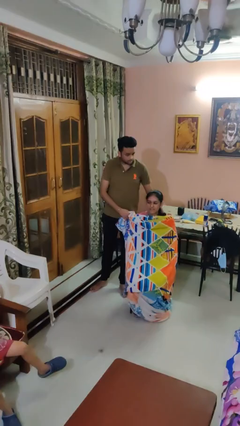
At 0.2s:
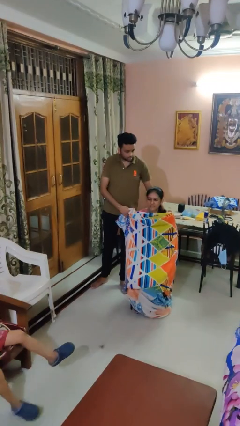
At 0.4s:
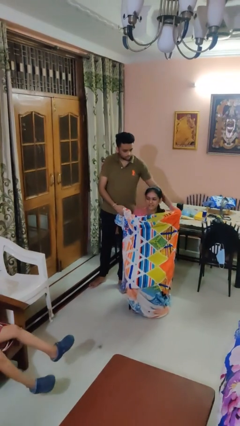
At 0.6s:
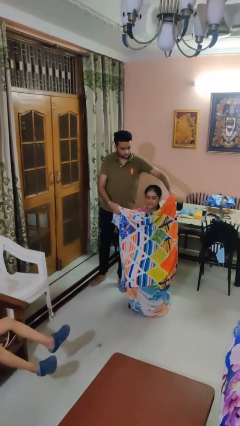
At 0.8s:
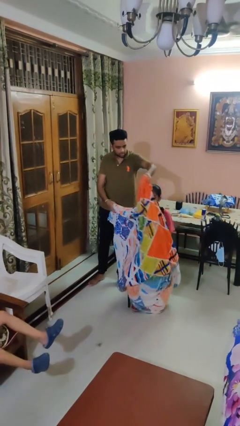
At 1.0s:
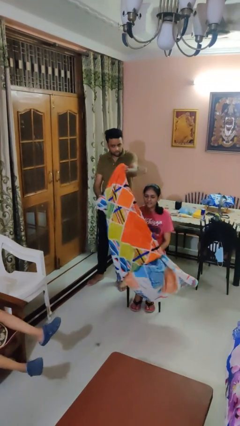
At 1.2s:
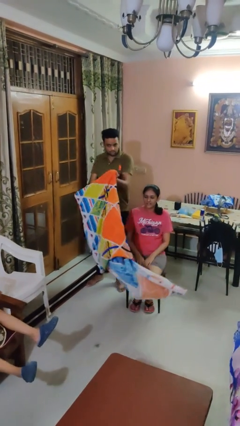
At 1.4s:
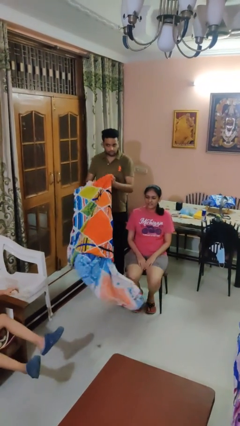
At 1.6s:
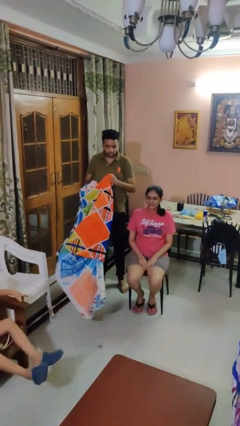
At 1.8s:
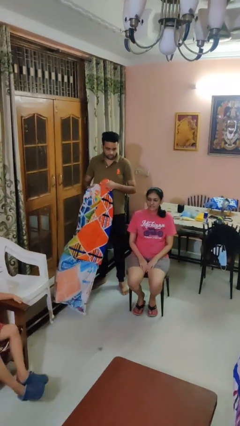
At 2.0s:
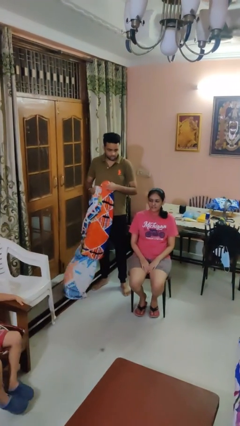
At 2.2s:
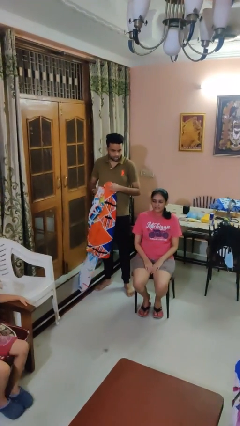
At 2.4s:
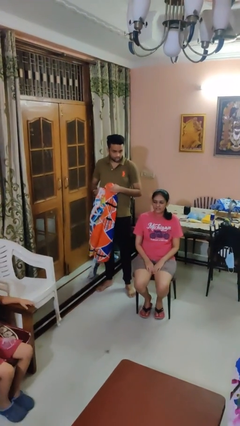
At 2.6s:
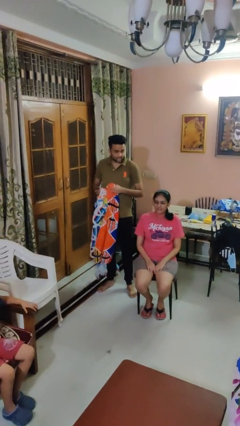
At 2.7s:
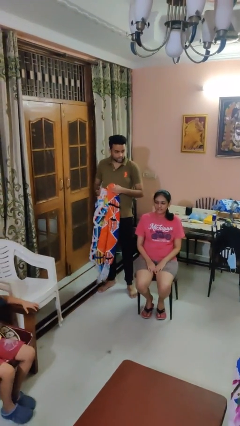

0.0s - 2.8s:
person uncovers friend with blanket

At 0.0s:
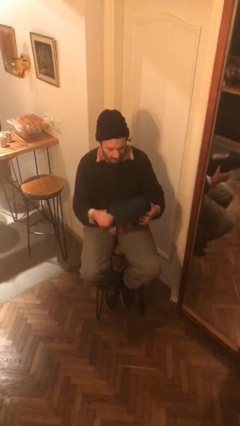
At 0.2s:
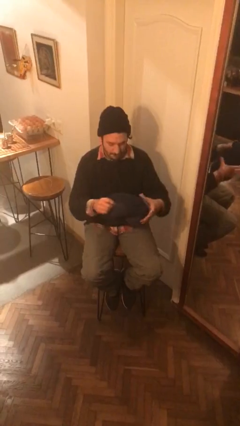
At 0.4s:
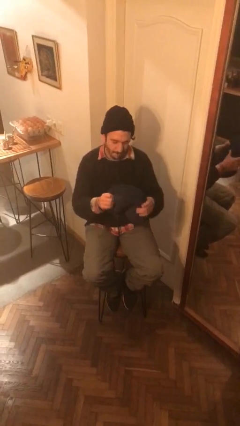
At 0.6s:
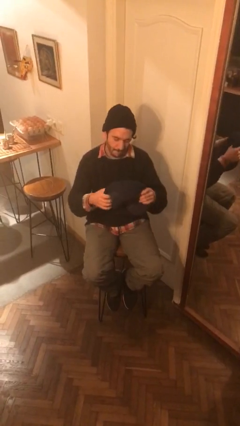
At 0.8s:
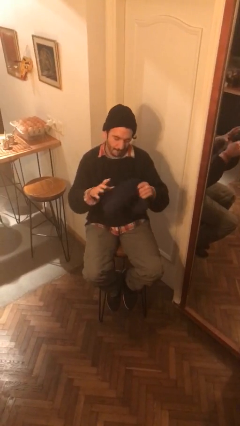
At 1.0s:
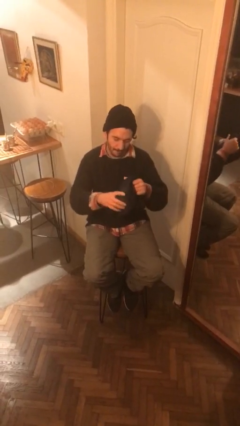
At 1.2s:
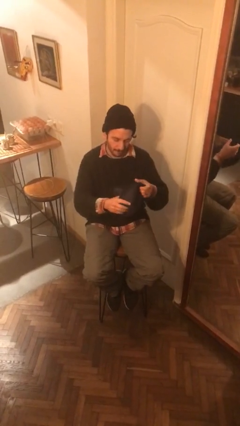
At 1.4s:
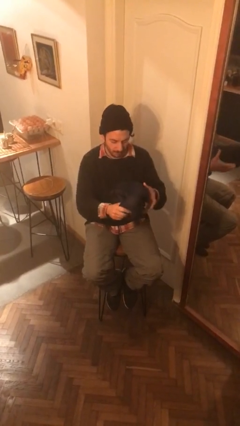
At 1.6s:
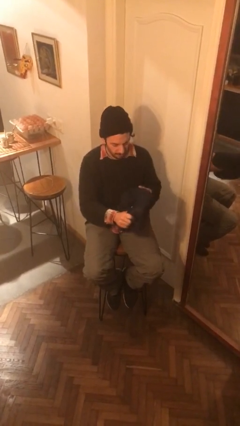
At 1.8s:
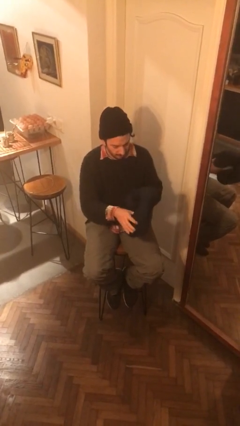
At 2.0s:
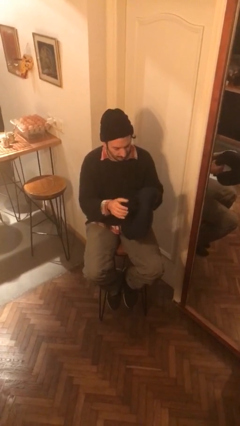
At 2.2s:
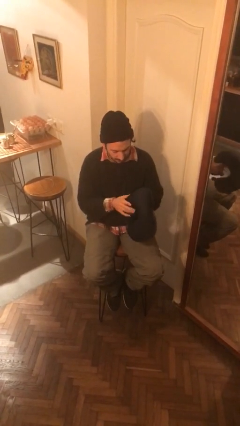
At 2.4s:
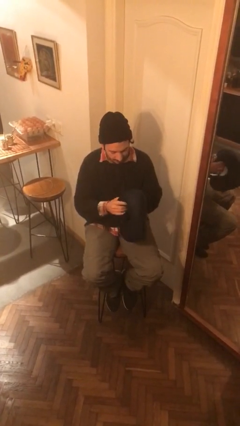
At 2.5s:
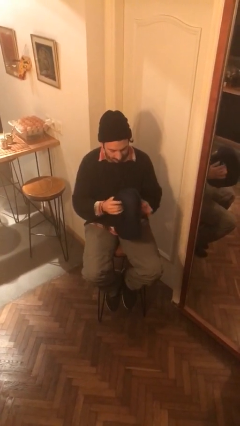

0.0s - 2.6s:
person squeezes object

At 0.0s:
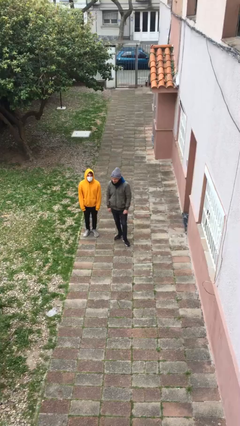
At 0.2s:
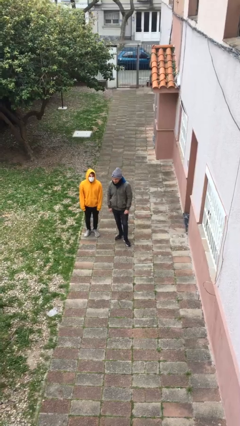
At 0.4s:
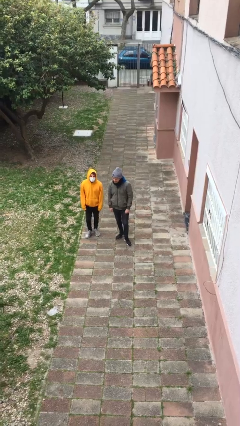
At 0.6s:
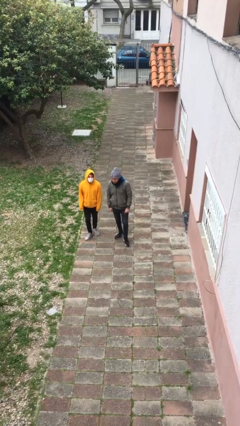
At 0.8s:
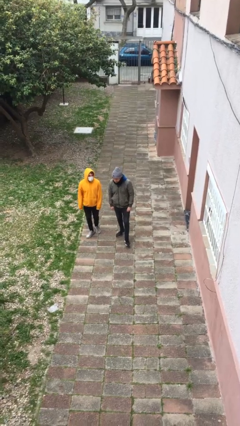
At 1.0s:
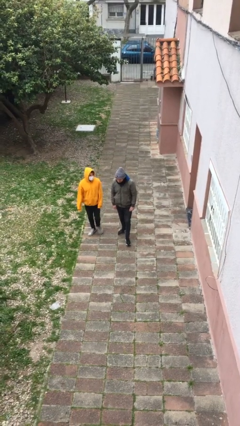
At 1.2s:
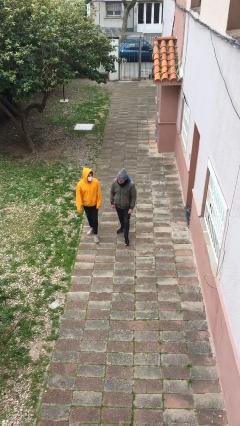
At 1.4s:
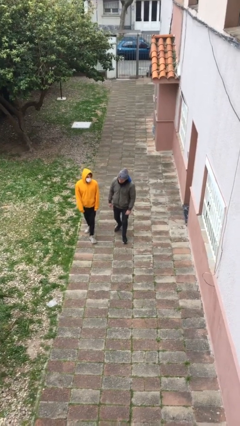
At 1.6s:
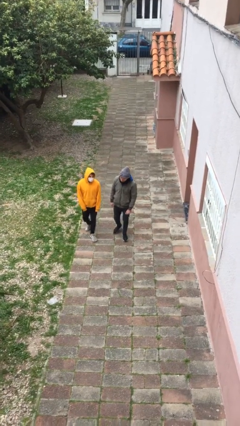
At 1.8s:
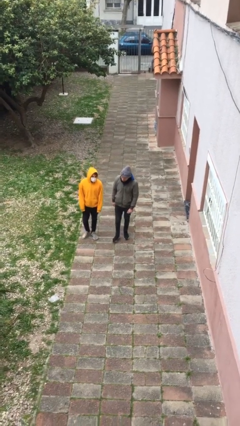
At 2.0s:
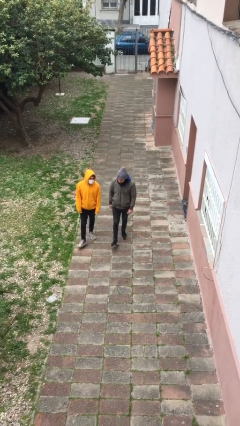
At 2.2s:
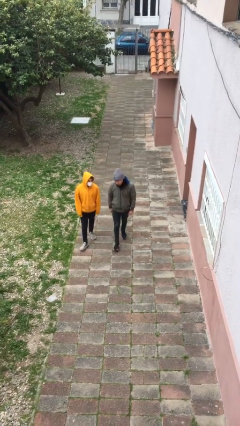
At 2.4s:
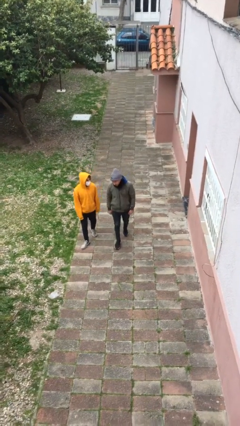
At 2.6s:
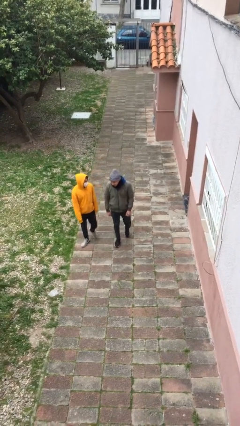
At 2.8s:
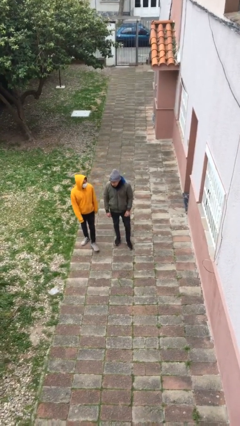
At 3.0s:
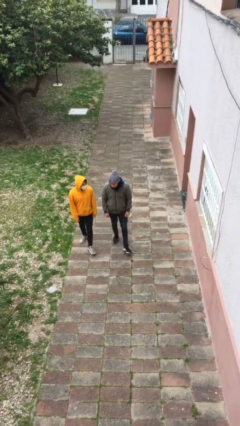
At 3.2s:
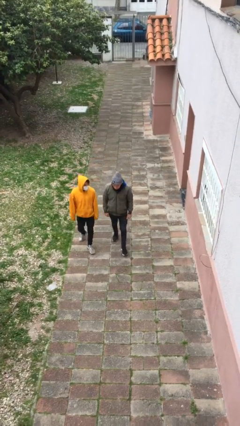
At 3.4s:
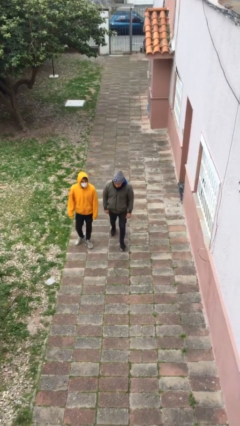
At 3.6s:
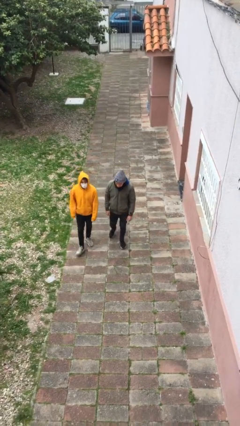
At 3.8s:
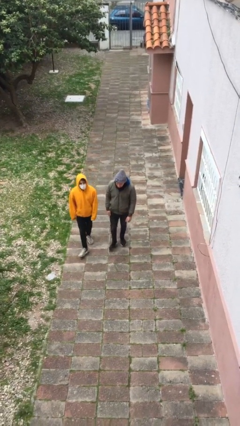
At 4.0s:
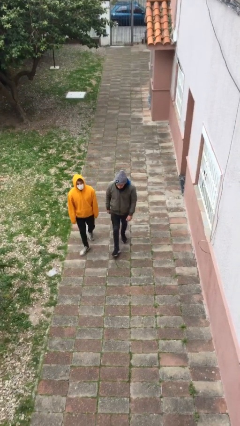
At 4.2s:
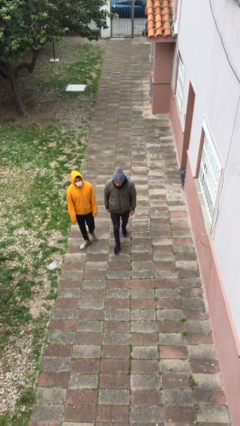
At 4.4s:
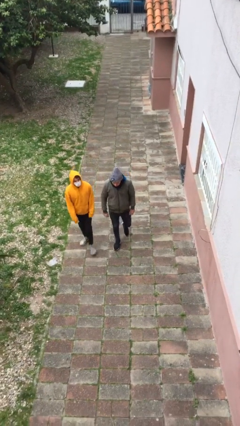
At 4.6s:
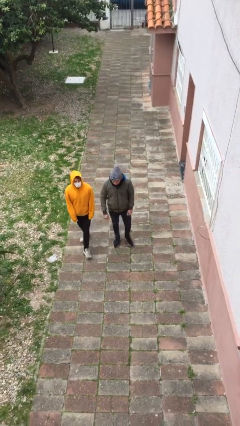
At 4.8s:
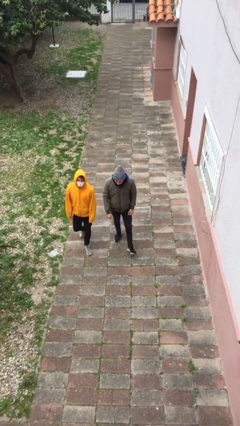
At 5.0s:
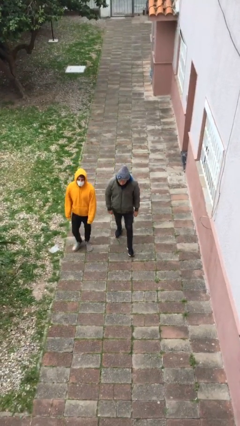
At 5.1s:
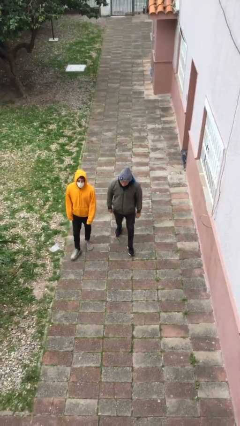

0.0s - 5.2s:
person talks to person

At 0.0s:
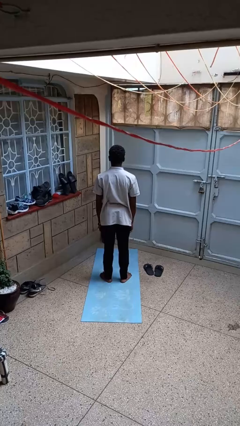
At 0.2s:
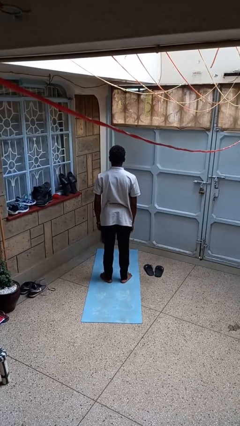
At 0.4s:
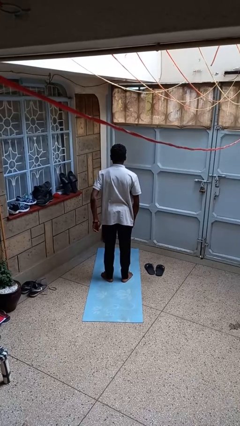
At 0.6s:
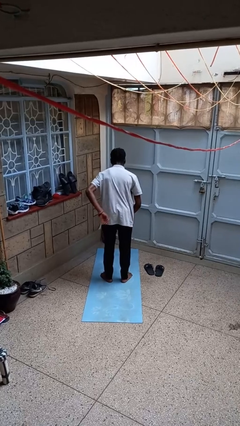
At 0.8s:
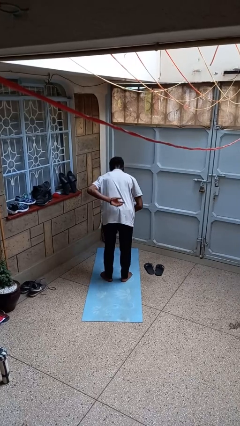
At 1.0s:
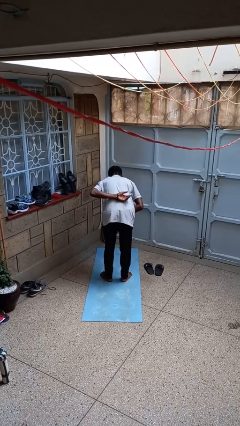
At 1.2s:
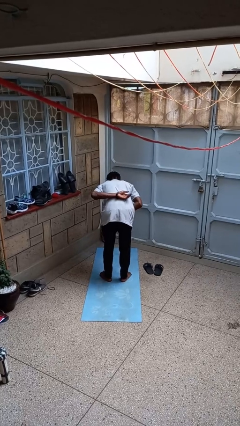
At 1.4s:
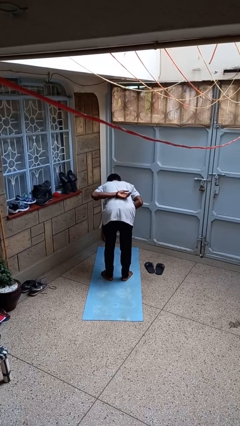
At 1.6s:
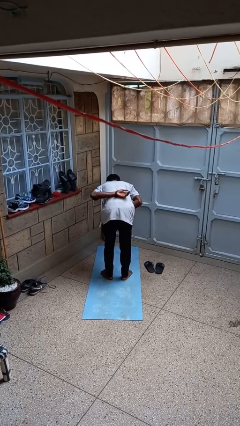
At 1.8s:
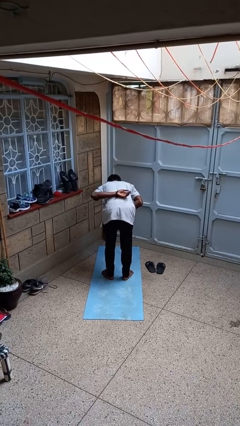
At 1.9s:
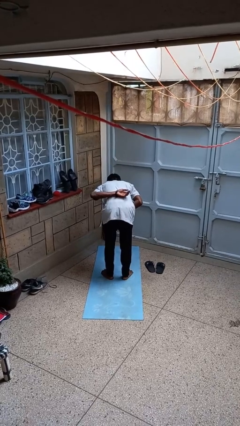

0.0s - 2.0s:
person bows

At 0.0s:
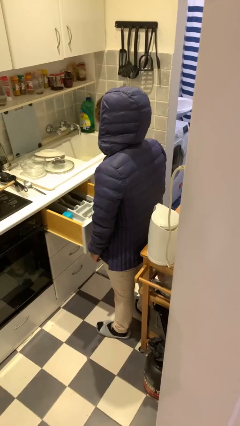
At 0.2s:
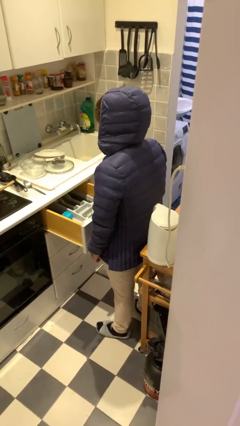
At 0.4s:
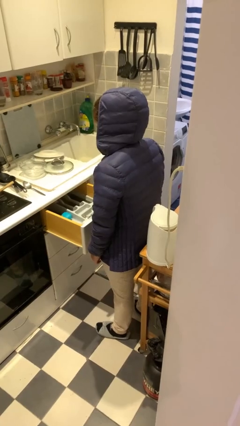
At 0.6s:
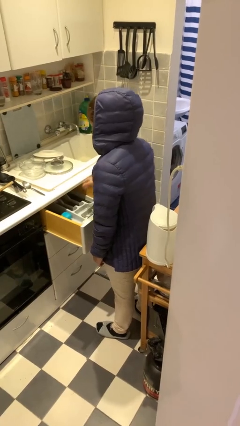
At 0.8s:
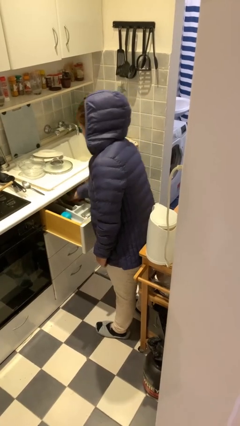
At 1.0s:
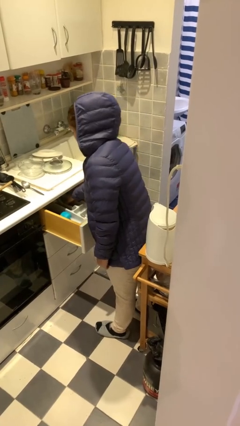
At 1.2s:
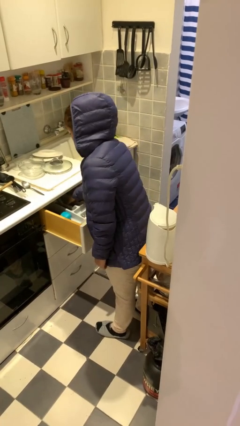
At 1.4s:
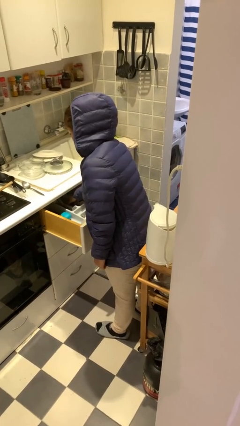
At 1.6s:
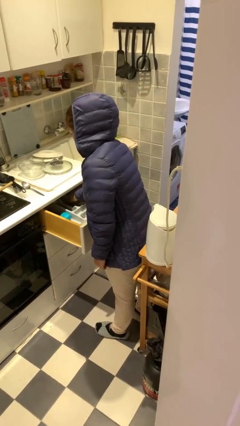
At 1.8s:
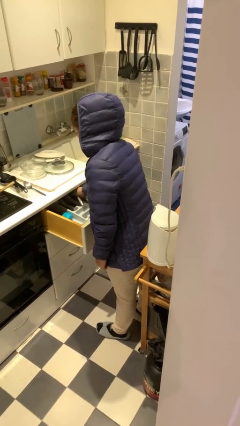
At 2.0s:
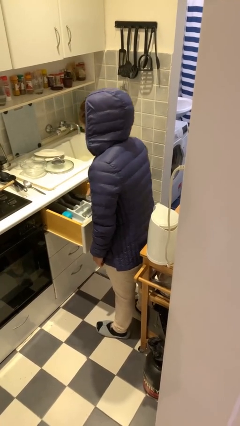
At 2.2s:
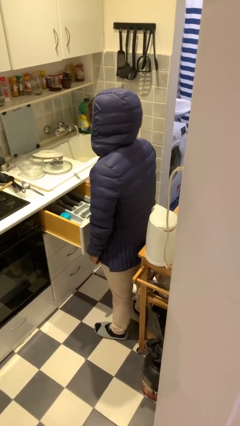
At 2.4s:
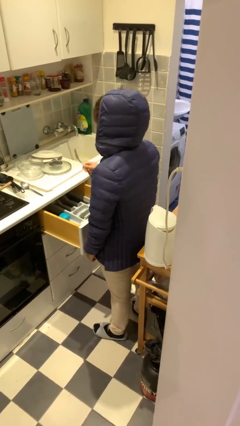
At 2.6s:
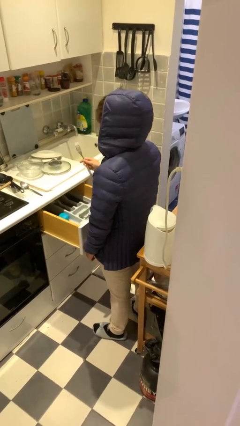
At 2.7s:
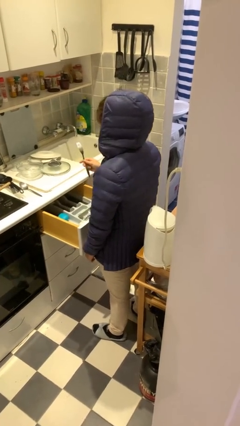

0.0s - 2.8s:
person takes object from kitchen drawer

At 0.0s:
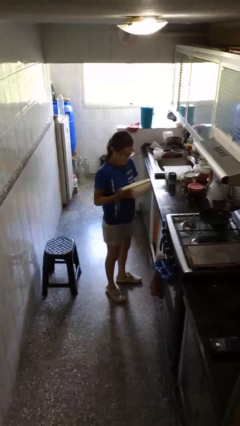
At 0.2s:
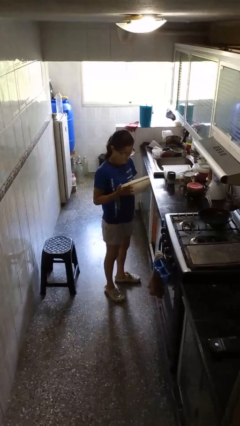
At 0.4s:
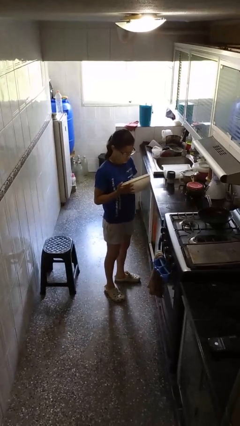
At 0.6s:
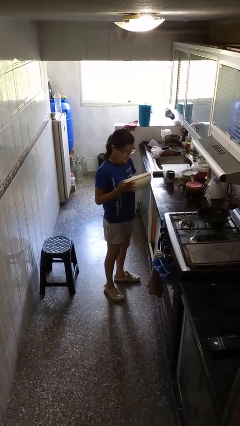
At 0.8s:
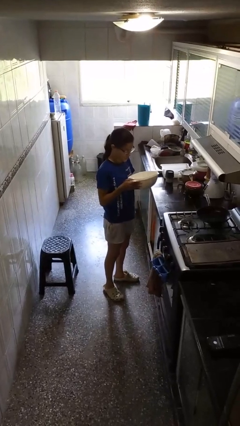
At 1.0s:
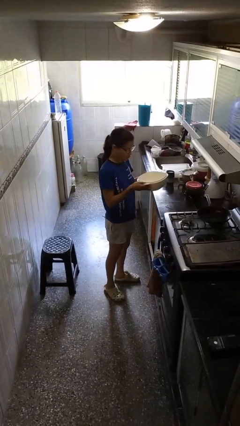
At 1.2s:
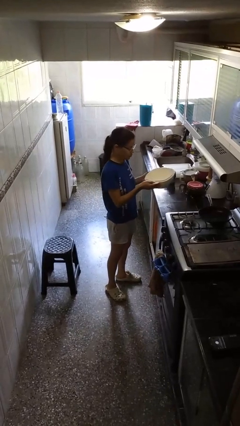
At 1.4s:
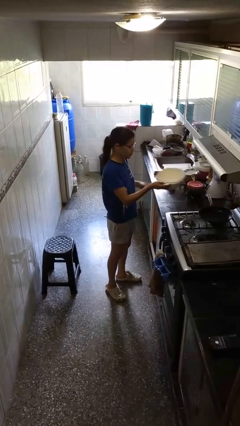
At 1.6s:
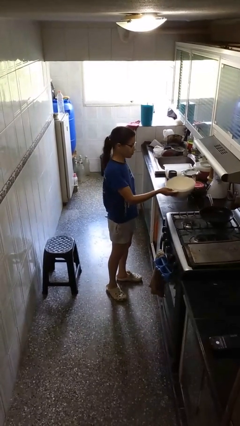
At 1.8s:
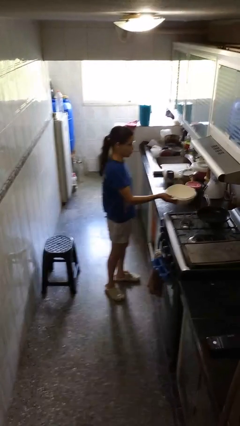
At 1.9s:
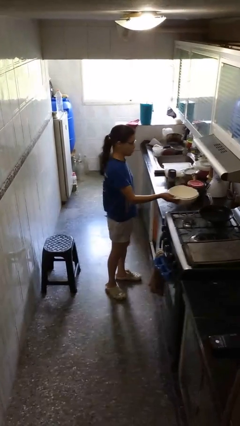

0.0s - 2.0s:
person puts down object on countertop

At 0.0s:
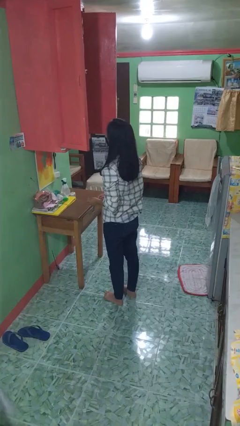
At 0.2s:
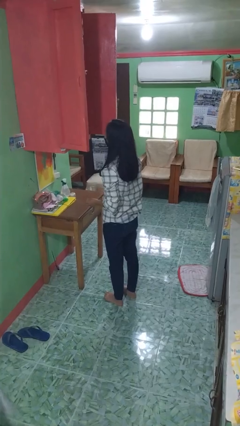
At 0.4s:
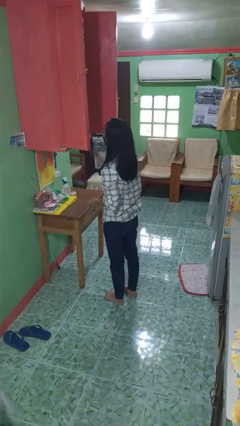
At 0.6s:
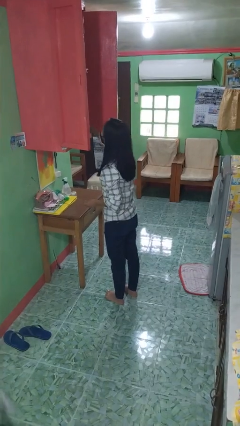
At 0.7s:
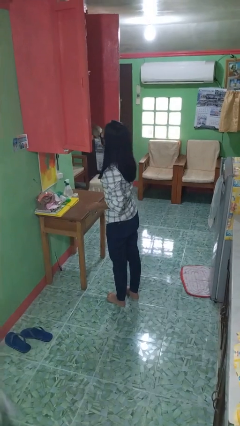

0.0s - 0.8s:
person picks up object from cabinet
